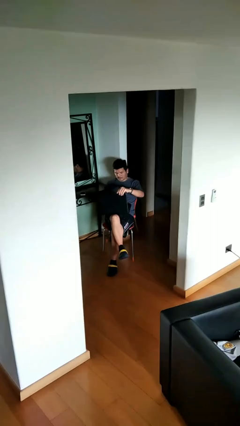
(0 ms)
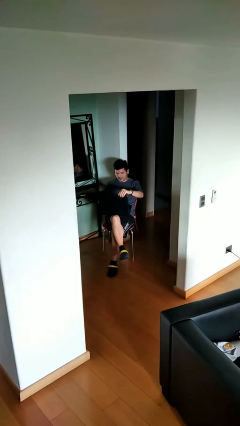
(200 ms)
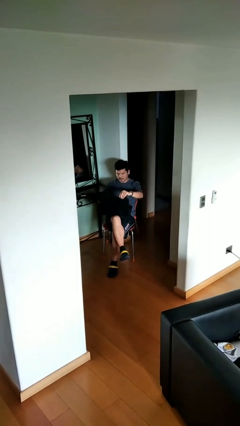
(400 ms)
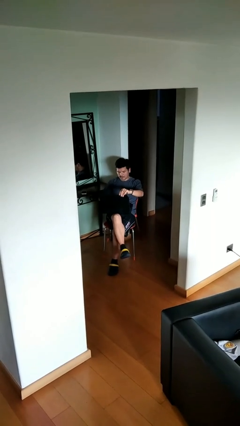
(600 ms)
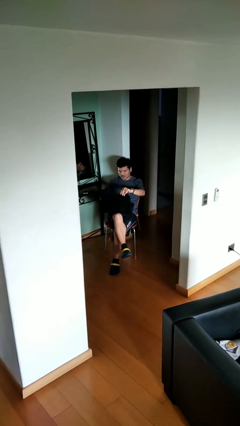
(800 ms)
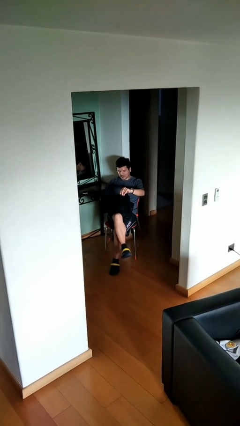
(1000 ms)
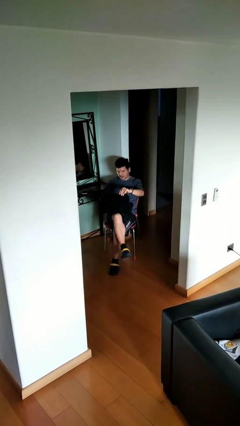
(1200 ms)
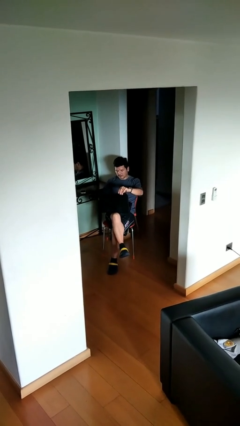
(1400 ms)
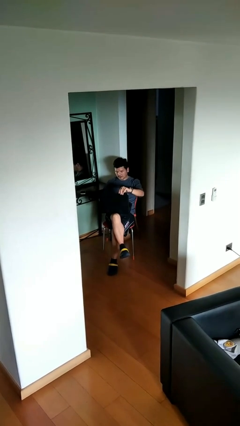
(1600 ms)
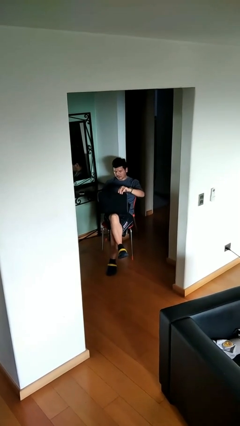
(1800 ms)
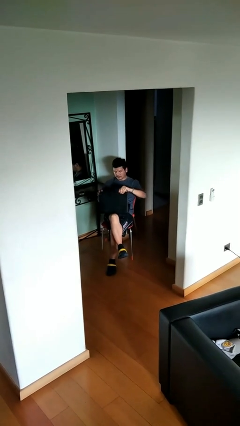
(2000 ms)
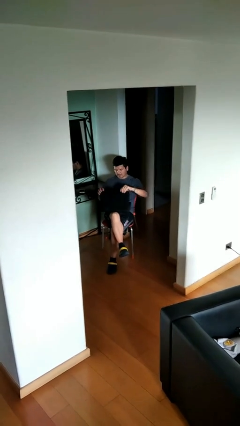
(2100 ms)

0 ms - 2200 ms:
person interacts with laptop

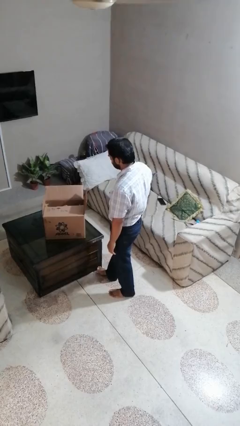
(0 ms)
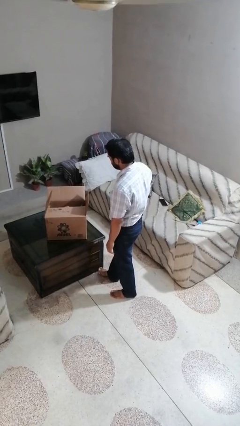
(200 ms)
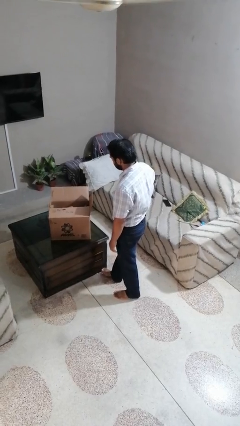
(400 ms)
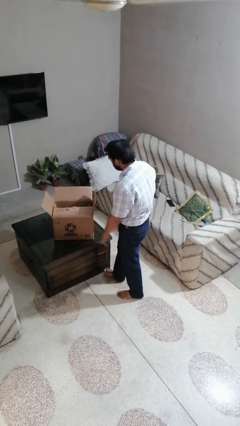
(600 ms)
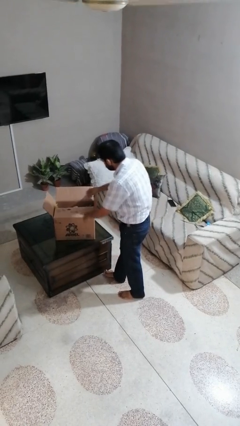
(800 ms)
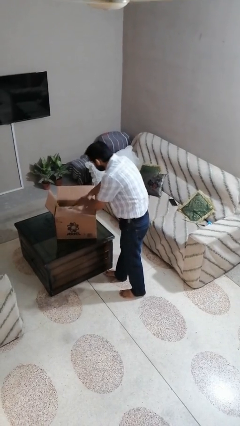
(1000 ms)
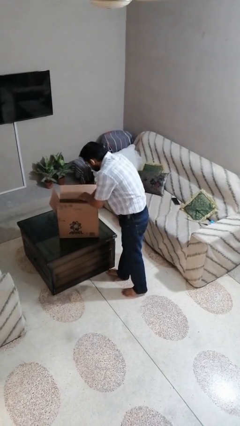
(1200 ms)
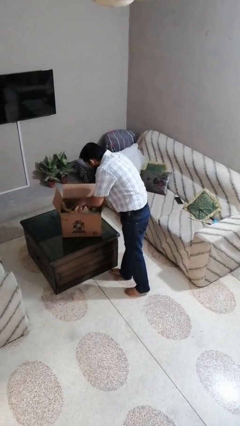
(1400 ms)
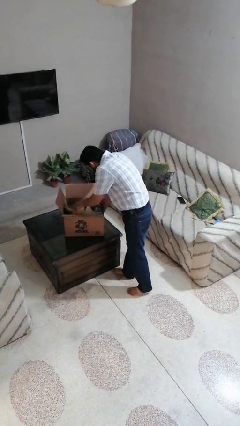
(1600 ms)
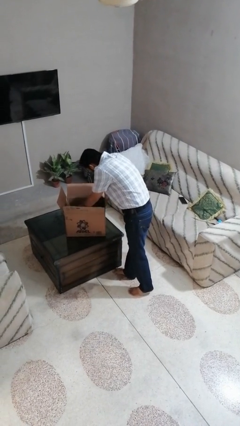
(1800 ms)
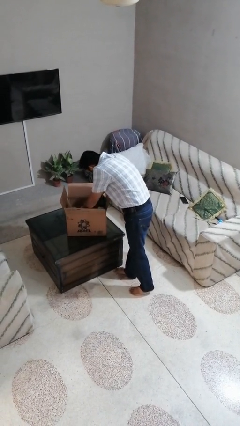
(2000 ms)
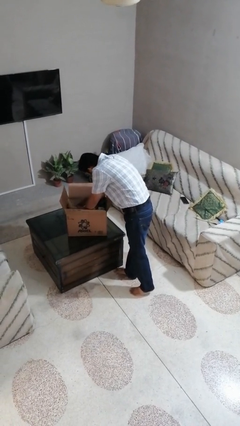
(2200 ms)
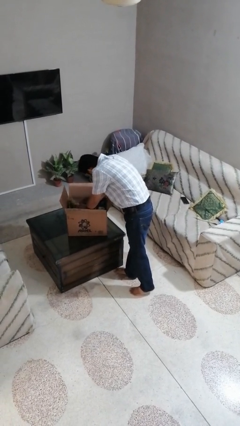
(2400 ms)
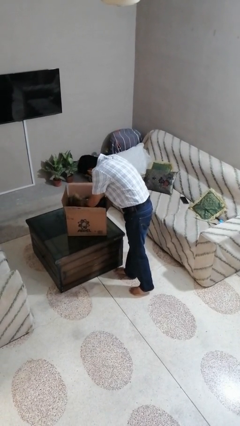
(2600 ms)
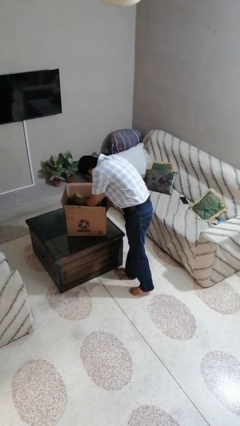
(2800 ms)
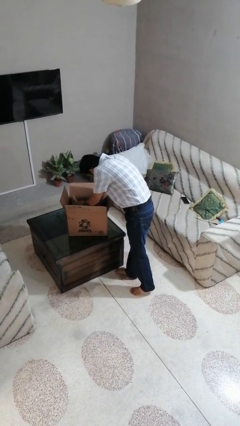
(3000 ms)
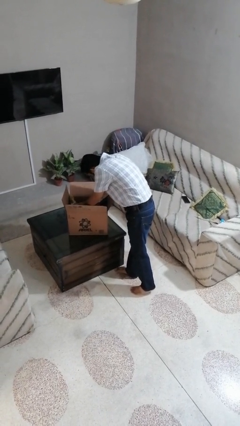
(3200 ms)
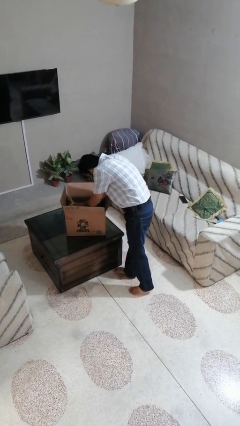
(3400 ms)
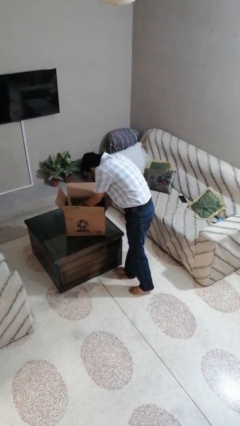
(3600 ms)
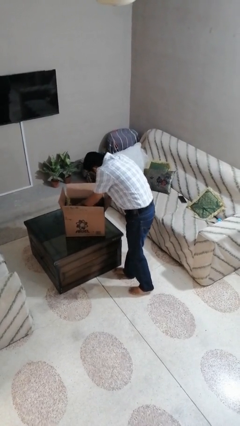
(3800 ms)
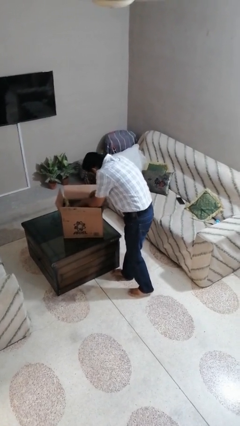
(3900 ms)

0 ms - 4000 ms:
person searches in box

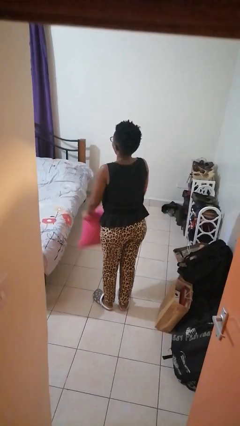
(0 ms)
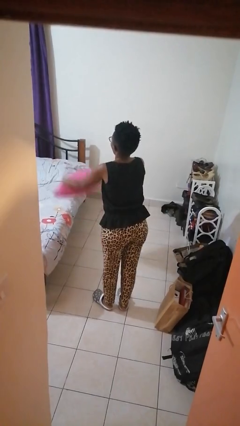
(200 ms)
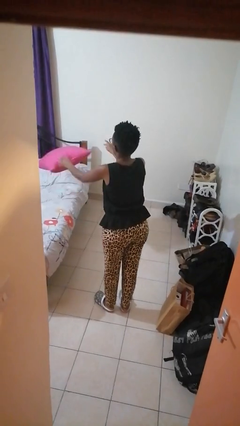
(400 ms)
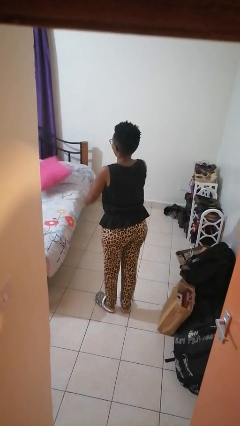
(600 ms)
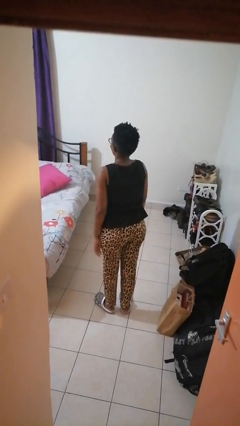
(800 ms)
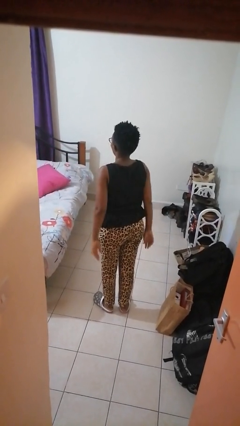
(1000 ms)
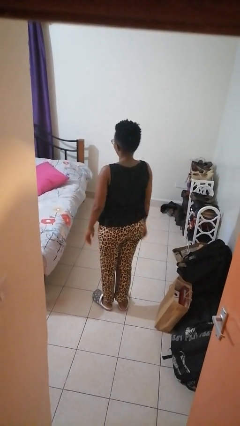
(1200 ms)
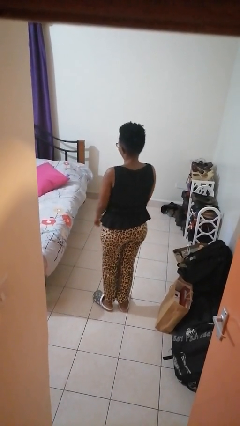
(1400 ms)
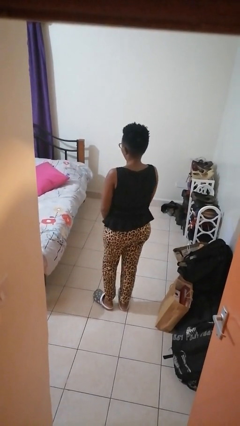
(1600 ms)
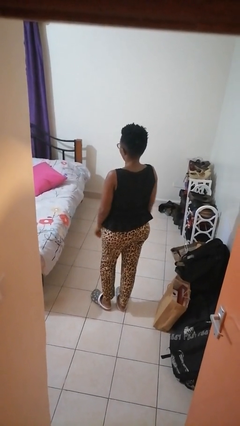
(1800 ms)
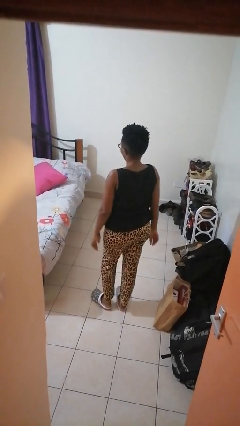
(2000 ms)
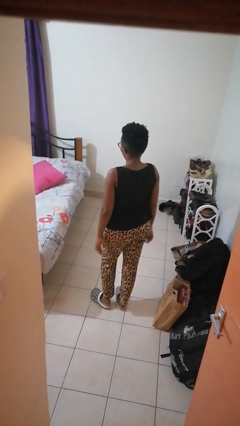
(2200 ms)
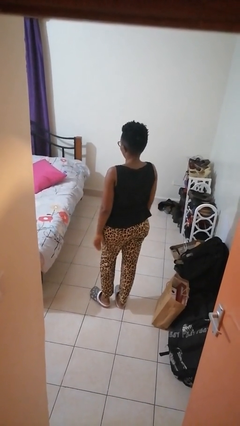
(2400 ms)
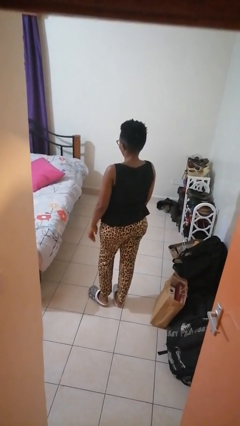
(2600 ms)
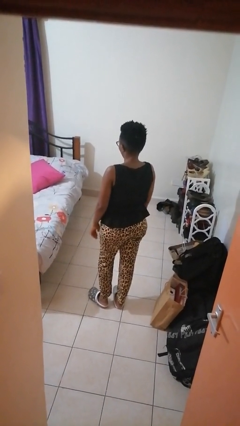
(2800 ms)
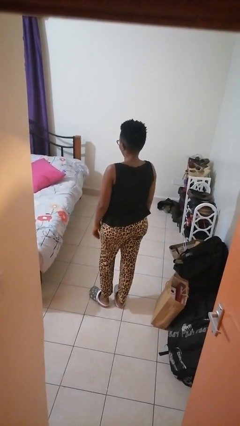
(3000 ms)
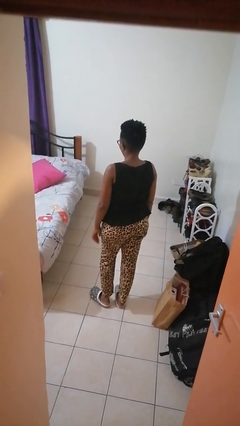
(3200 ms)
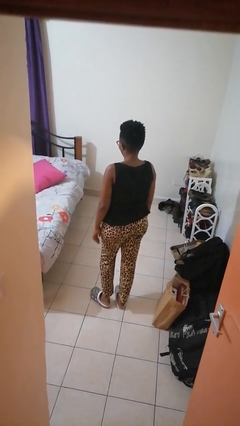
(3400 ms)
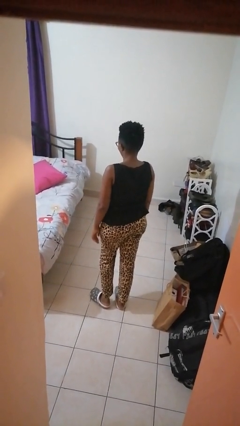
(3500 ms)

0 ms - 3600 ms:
person throws object on bed

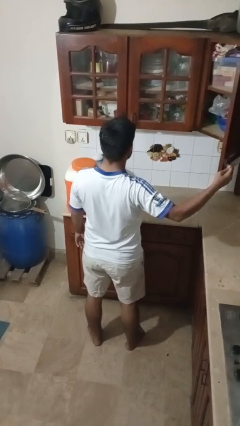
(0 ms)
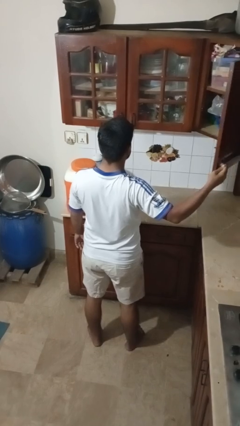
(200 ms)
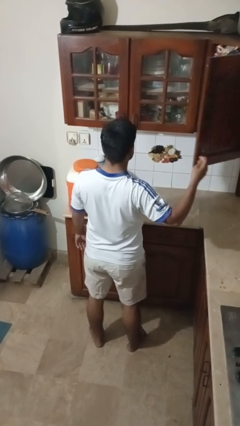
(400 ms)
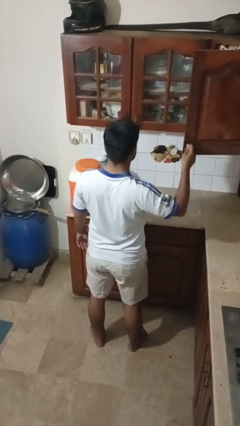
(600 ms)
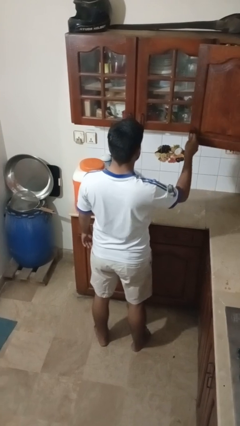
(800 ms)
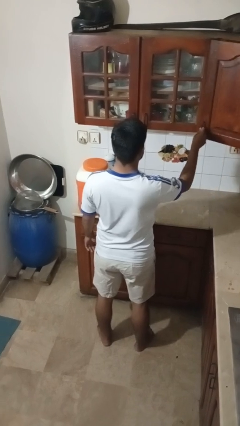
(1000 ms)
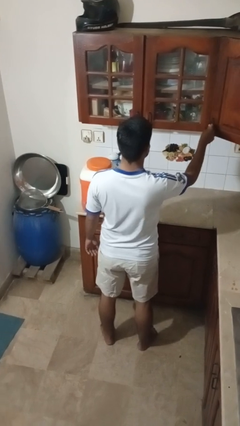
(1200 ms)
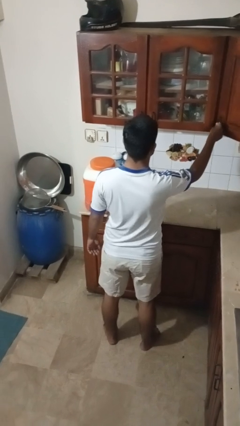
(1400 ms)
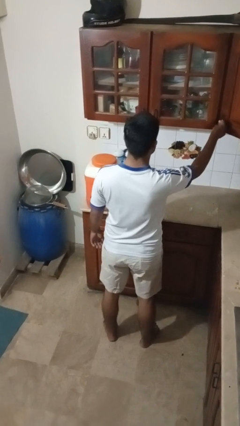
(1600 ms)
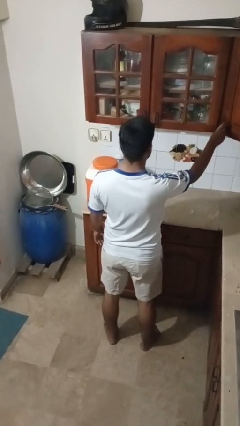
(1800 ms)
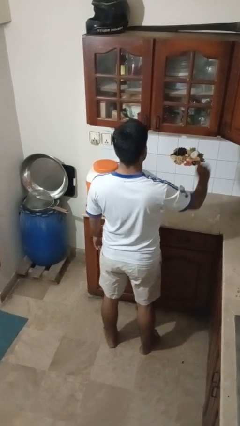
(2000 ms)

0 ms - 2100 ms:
person closes cabinet

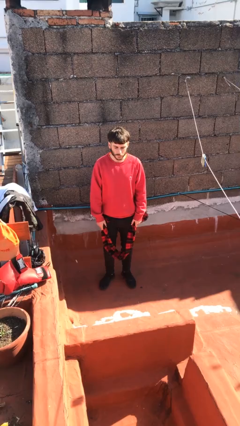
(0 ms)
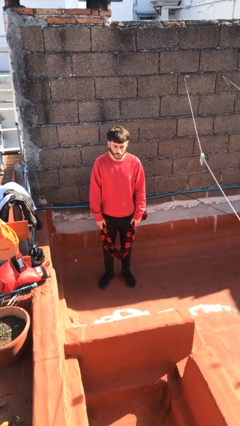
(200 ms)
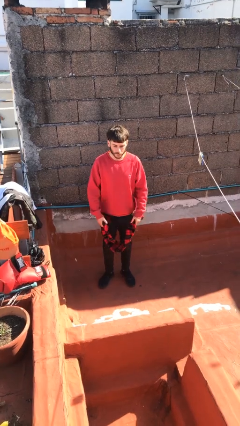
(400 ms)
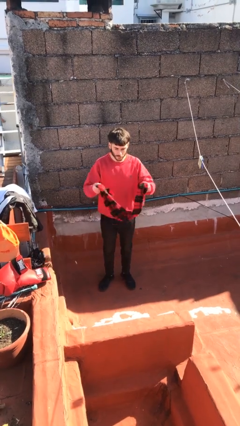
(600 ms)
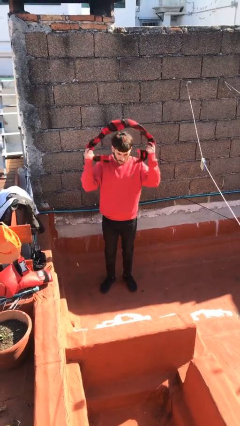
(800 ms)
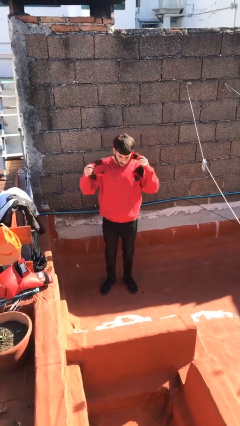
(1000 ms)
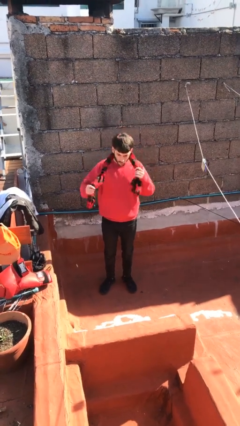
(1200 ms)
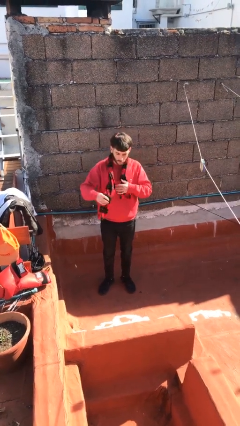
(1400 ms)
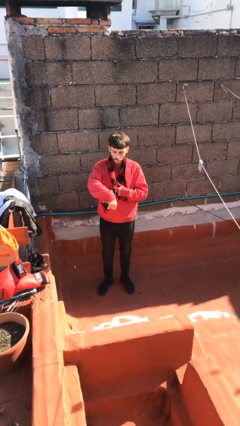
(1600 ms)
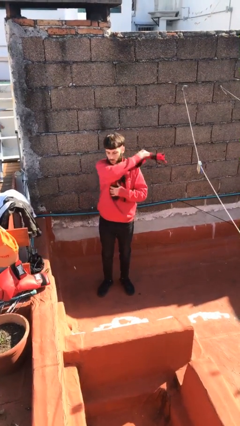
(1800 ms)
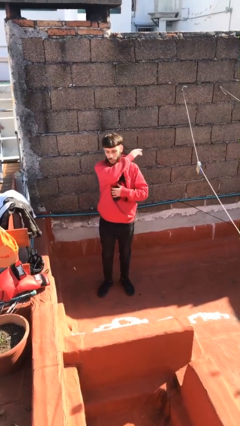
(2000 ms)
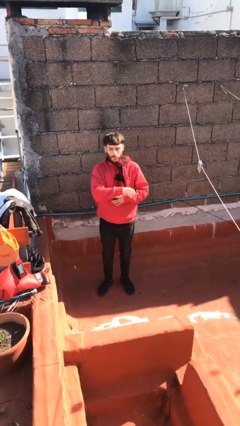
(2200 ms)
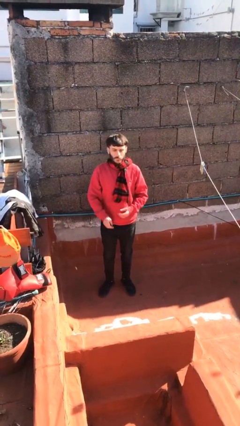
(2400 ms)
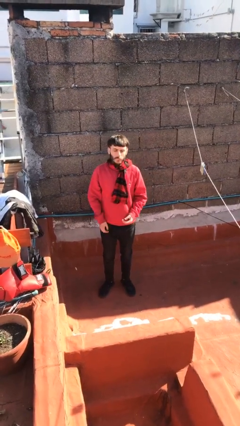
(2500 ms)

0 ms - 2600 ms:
person puts on scarf

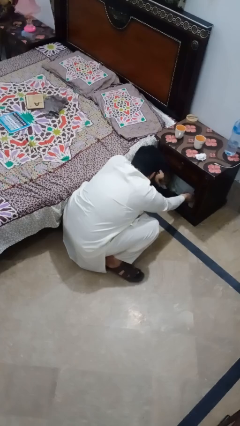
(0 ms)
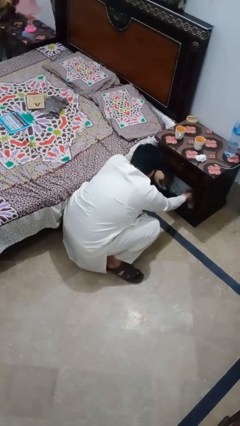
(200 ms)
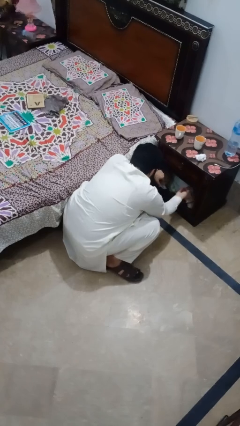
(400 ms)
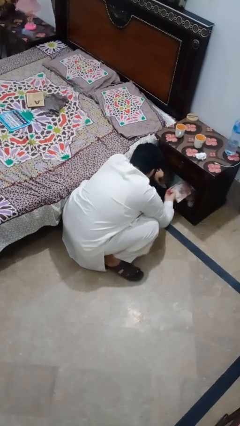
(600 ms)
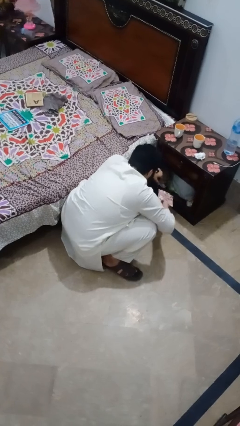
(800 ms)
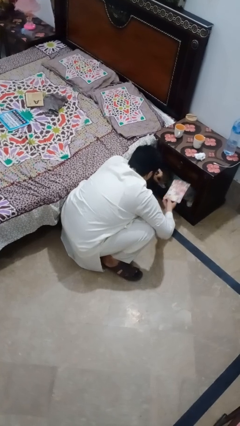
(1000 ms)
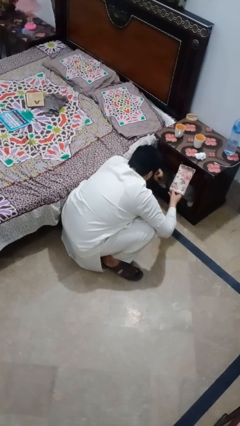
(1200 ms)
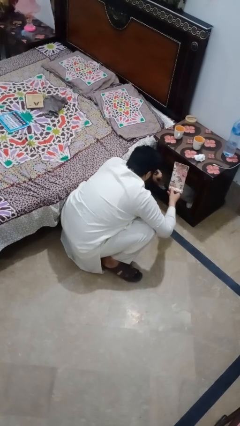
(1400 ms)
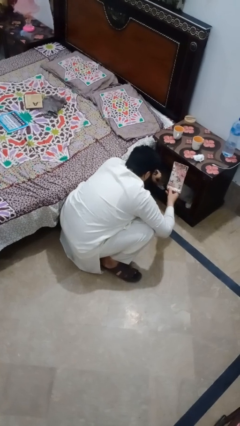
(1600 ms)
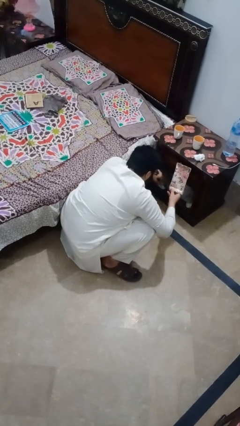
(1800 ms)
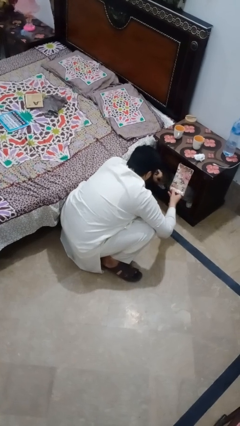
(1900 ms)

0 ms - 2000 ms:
person picks up object from cabinet

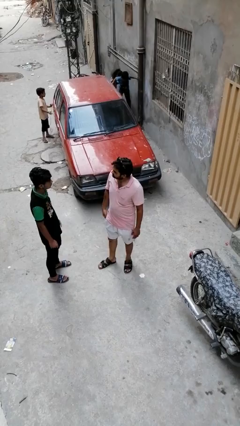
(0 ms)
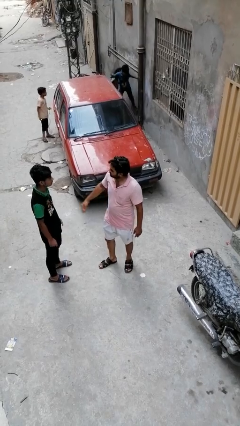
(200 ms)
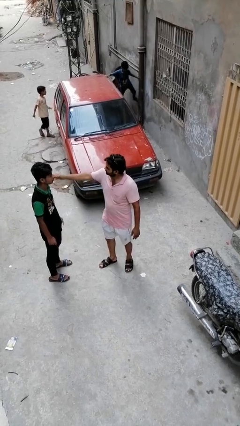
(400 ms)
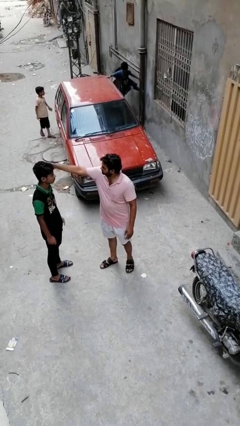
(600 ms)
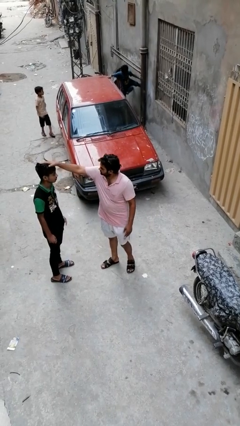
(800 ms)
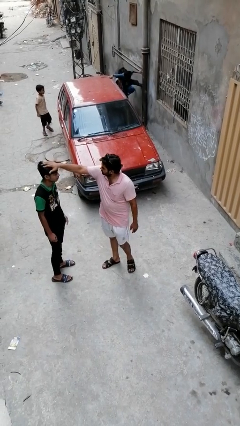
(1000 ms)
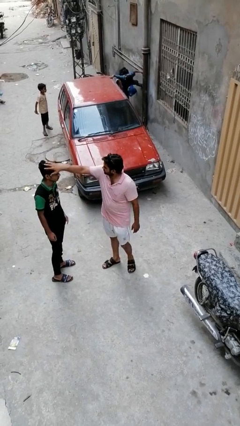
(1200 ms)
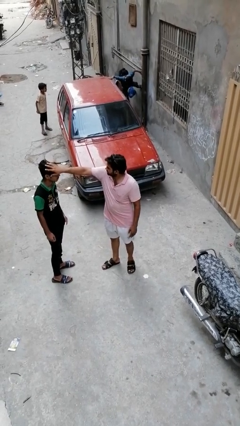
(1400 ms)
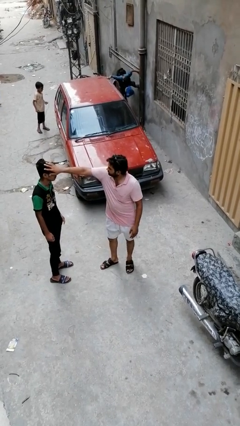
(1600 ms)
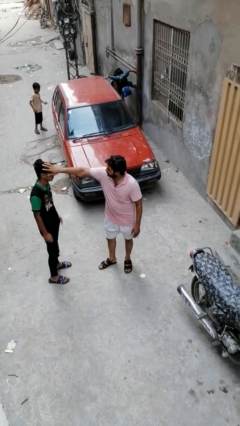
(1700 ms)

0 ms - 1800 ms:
person grabs person by hair
